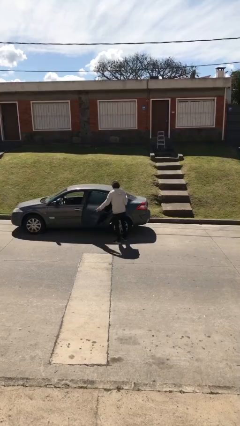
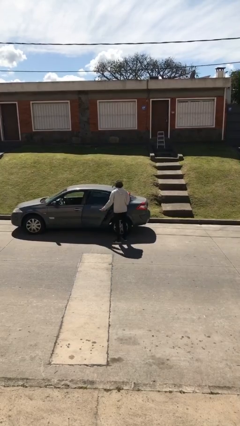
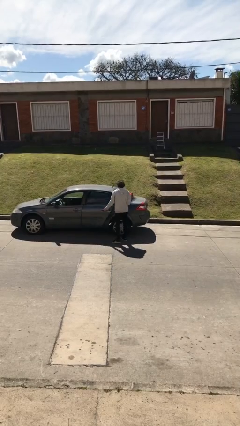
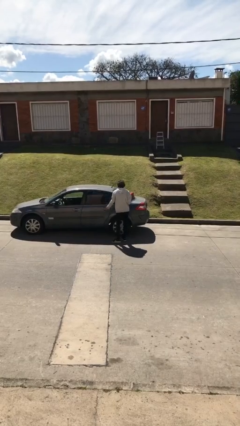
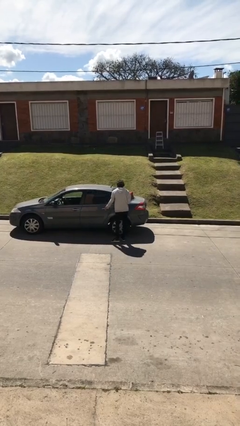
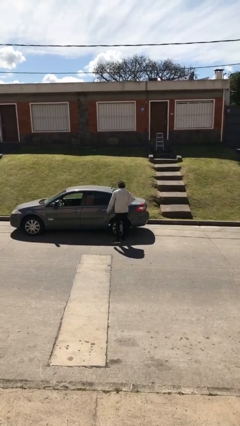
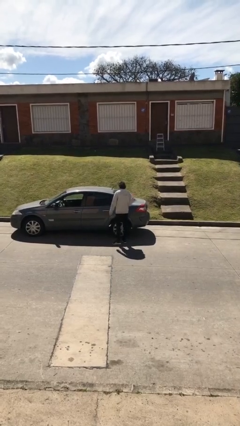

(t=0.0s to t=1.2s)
person closes car door

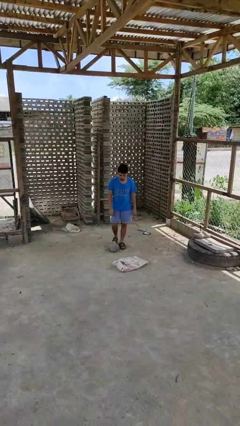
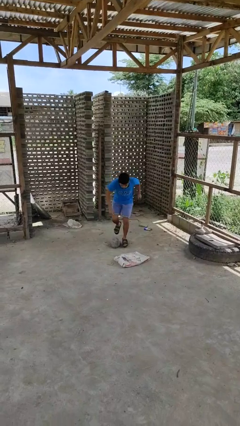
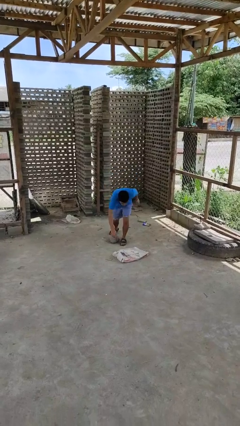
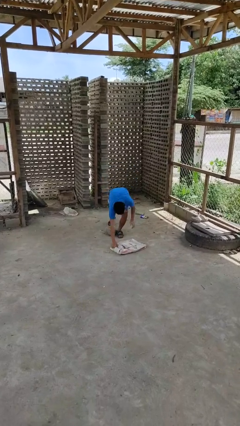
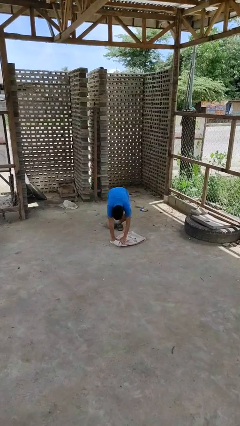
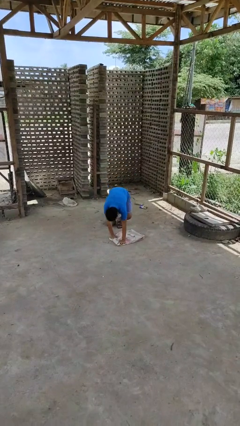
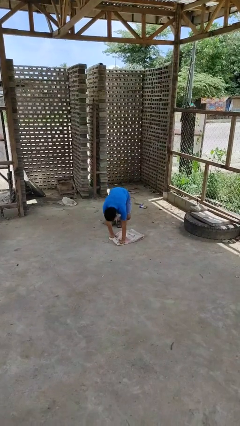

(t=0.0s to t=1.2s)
person trips on object on floor

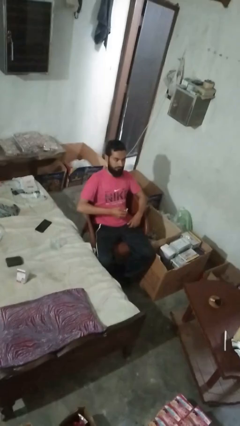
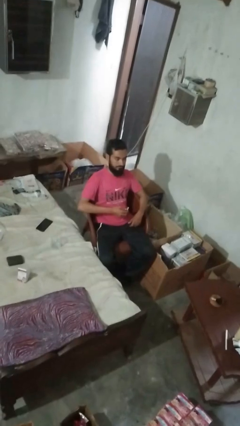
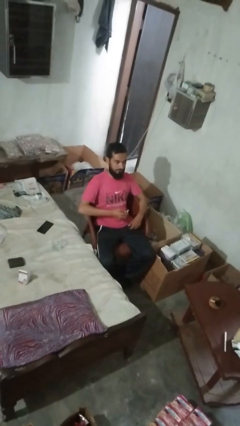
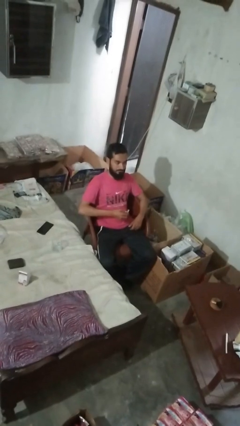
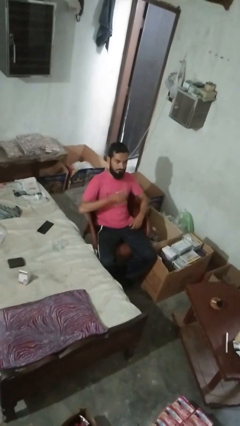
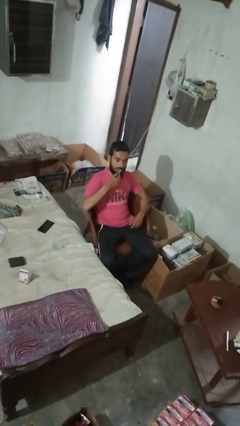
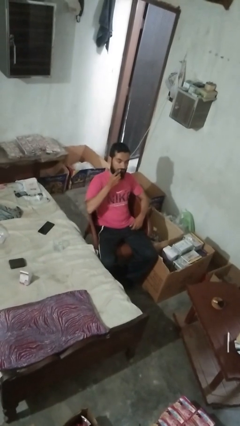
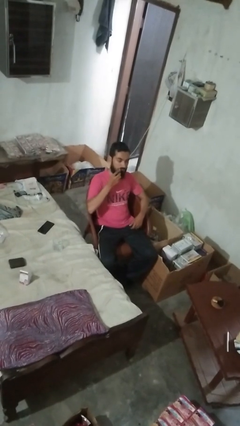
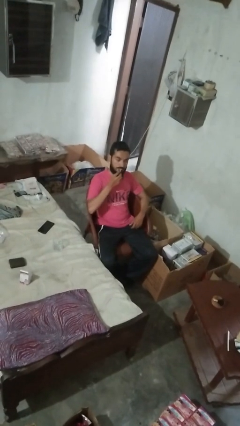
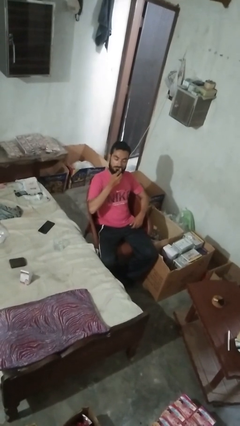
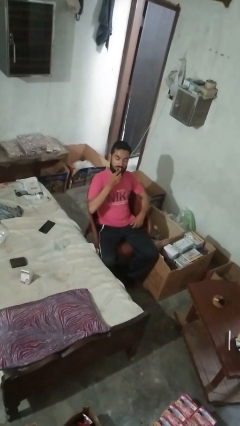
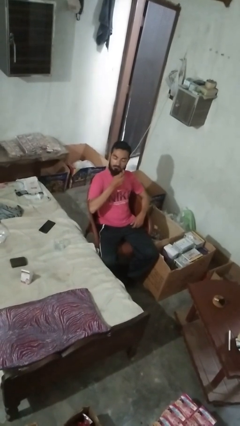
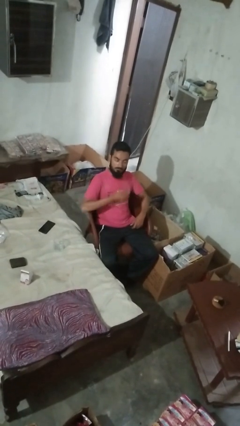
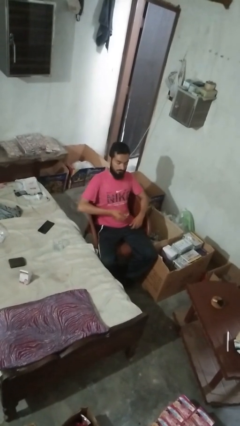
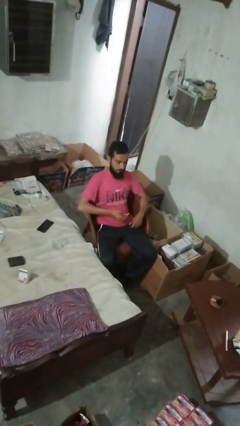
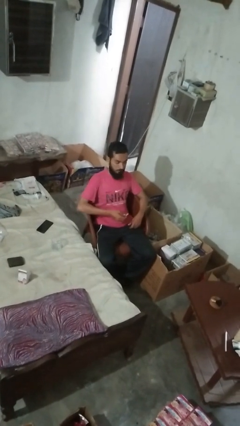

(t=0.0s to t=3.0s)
person applies lip makeup

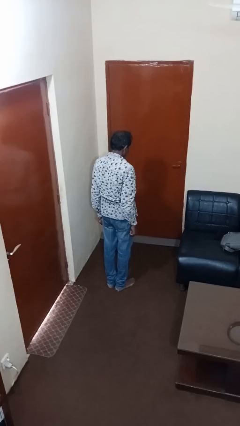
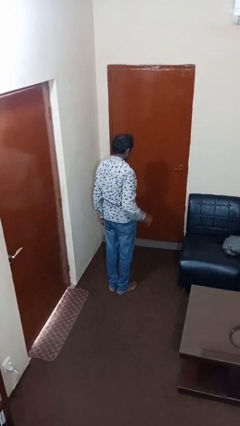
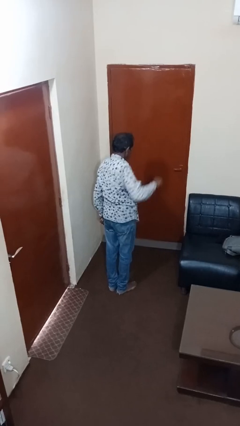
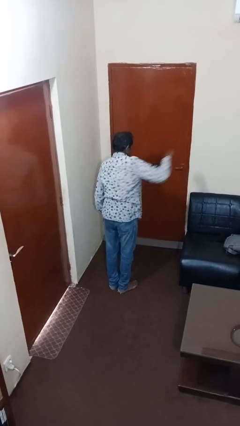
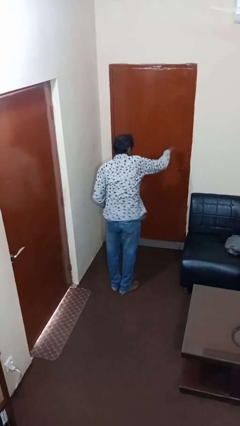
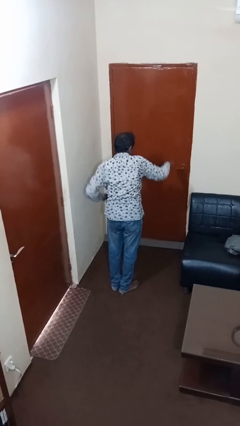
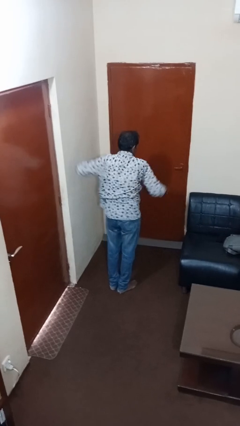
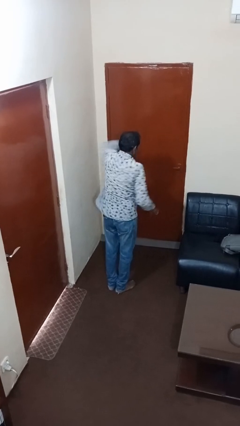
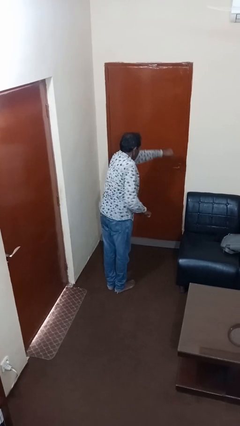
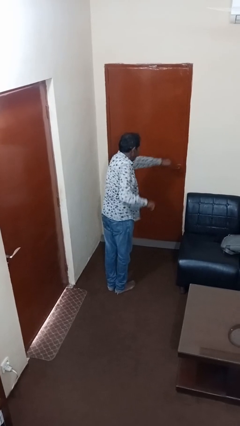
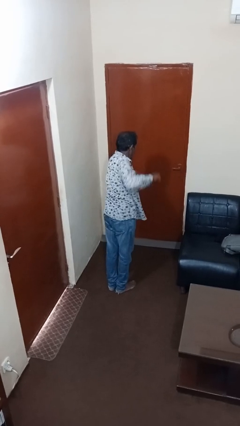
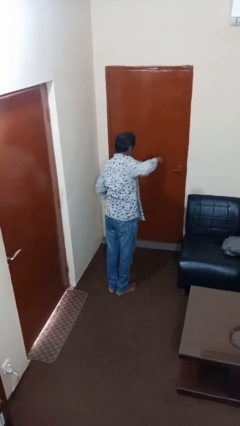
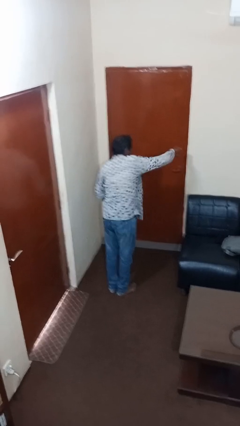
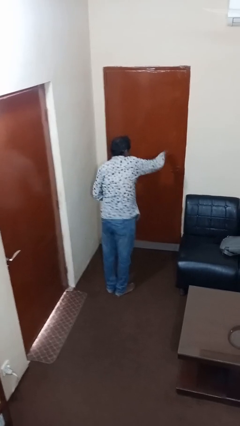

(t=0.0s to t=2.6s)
person punches

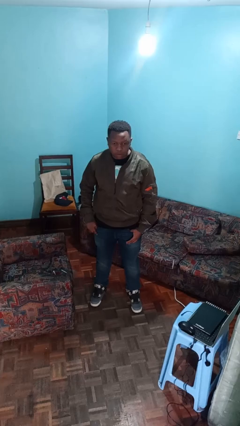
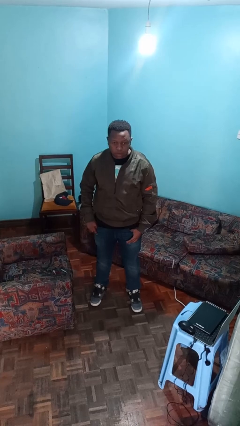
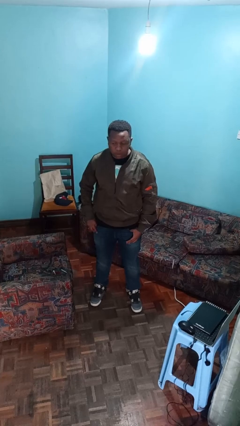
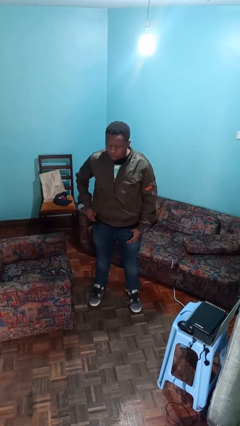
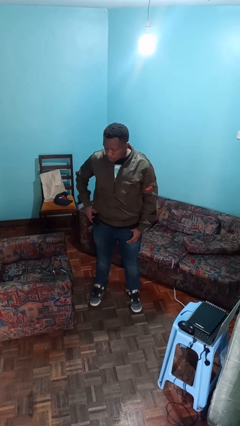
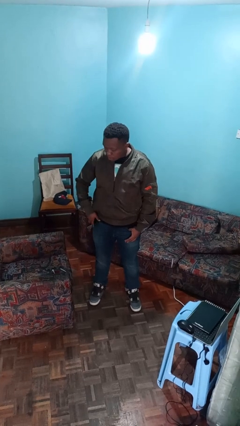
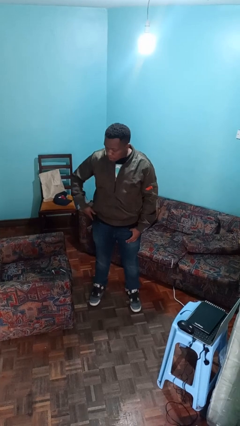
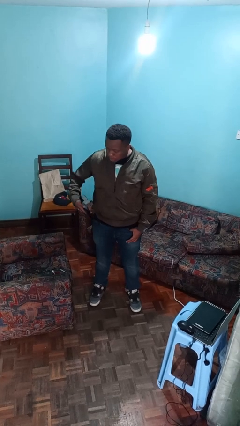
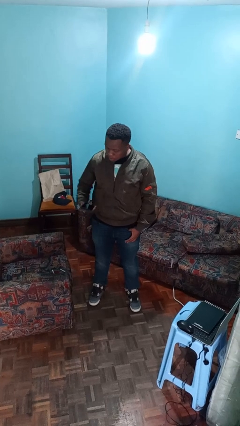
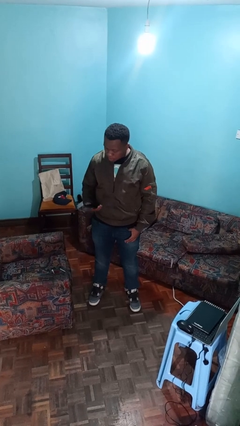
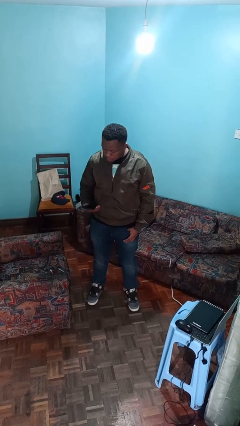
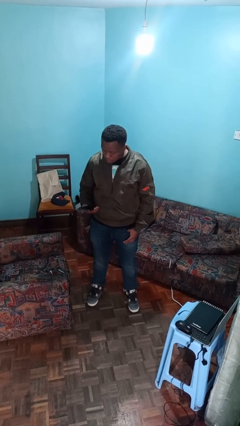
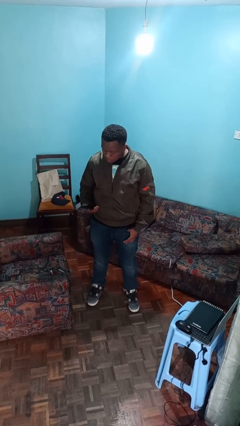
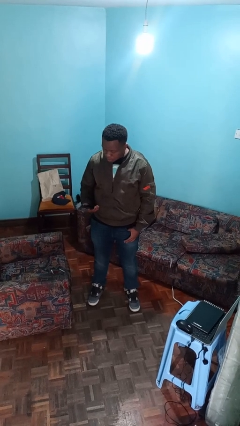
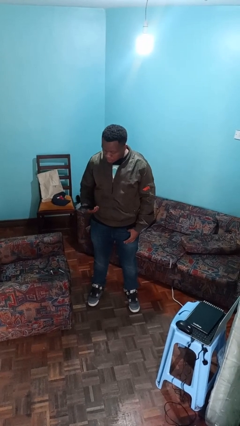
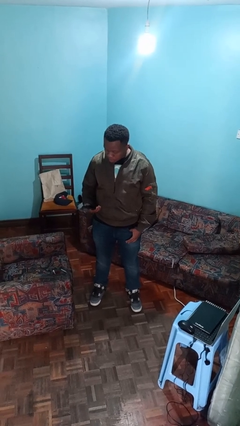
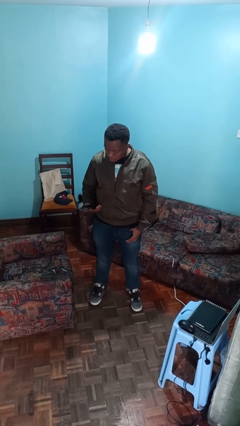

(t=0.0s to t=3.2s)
person takes phone from pocket

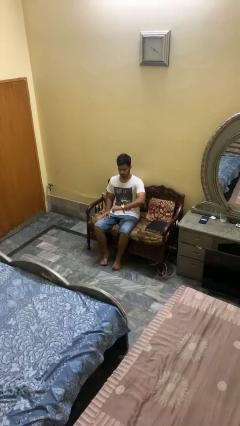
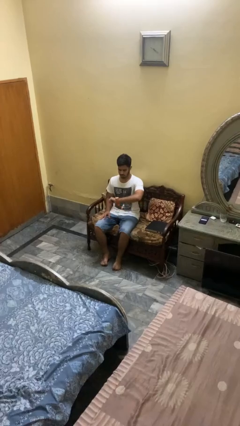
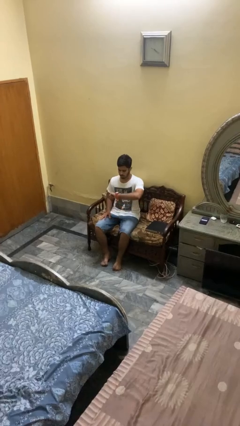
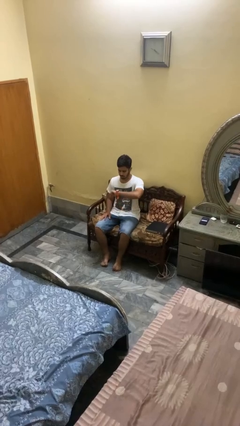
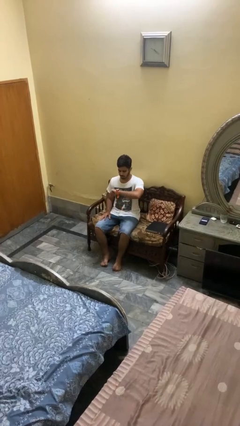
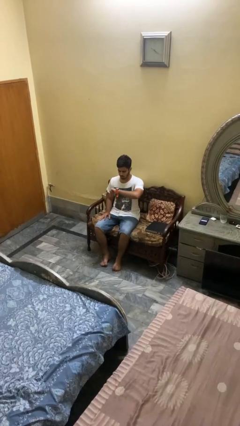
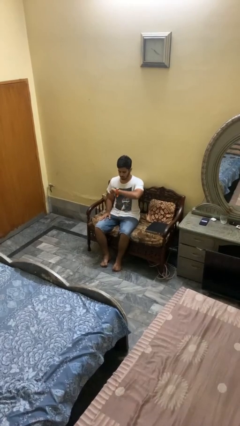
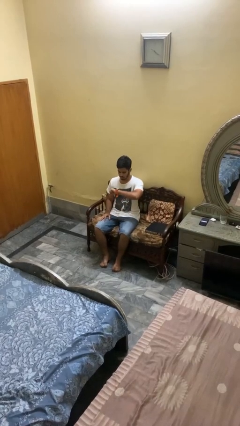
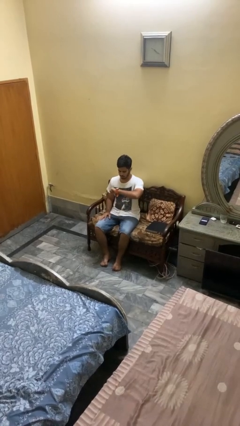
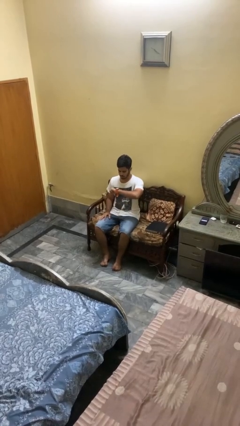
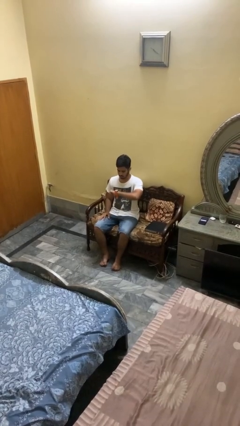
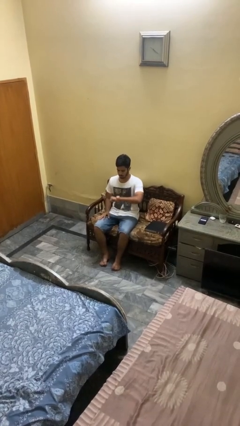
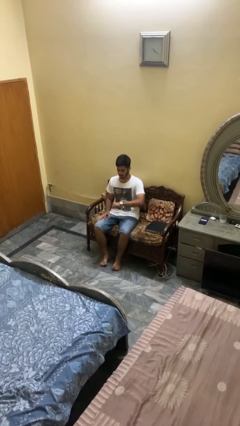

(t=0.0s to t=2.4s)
person looks at wristwatch

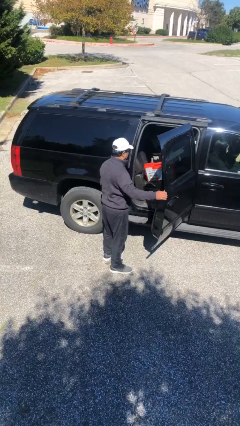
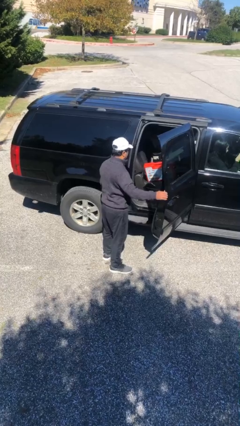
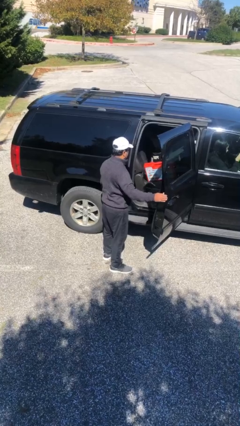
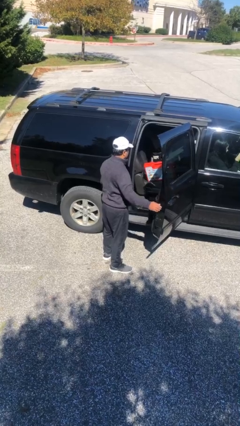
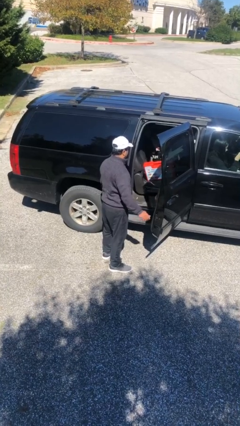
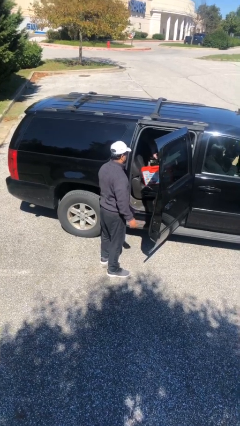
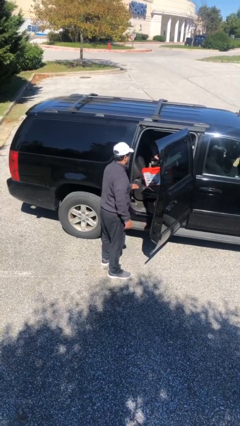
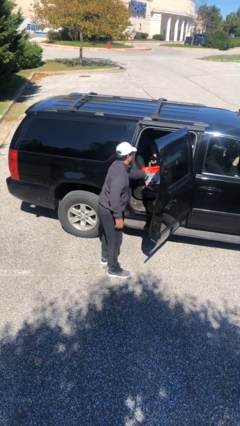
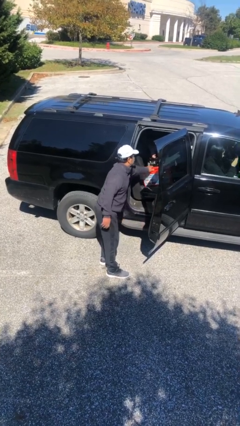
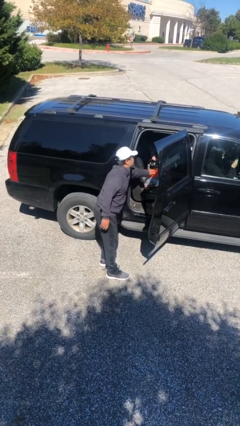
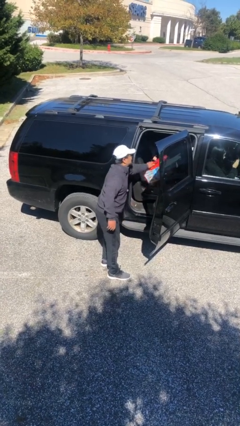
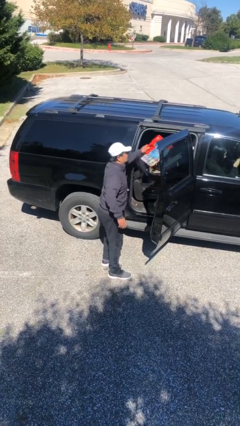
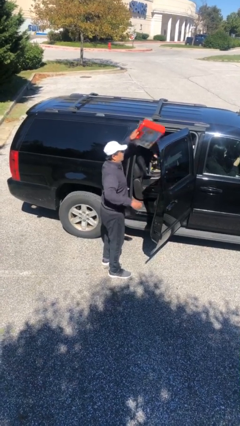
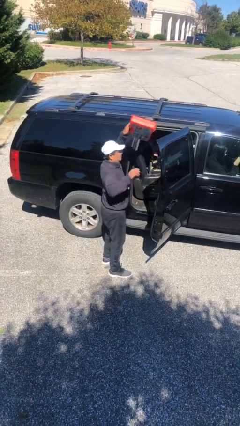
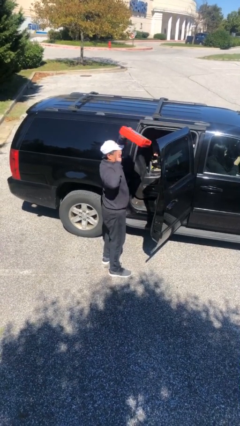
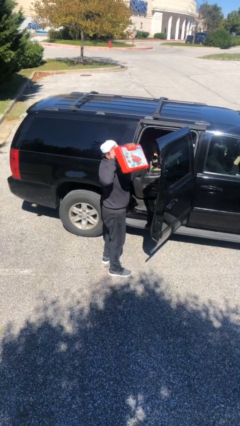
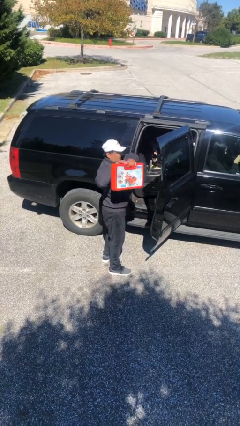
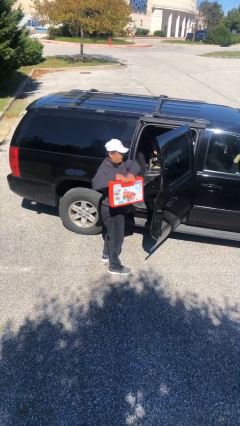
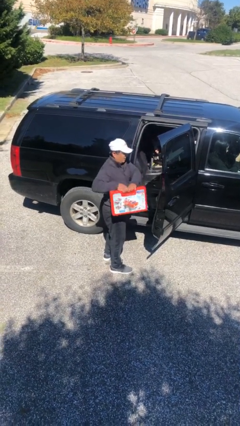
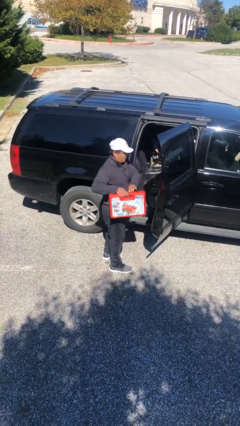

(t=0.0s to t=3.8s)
person unloads car
